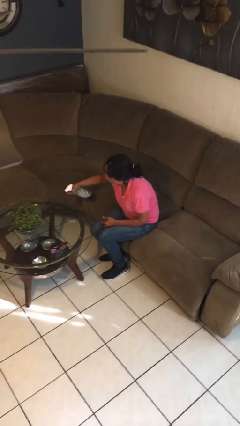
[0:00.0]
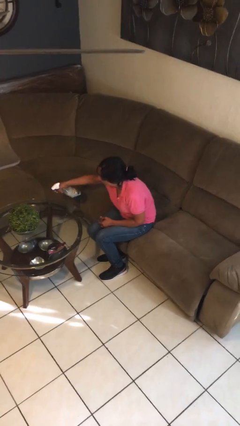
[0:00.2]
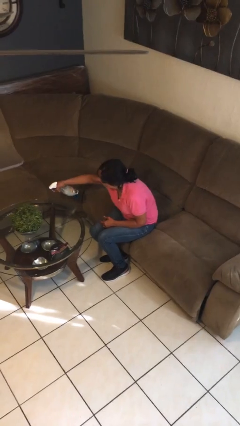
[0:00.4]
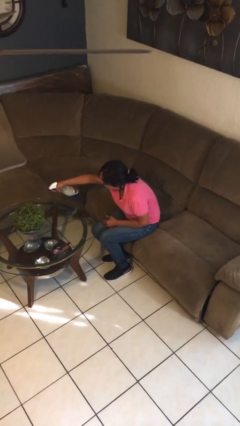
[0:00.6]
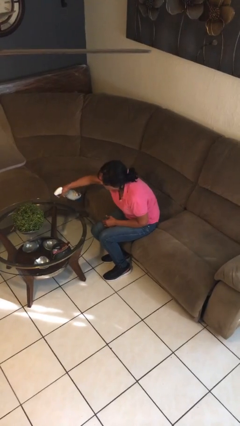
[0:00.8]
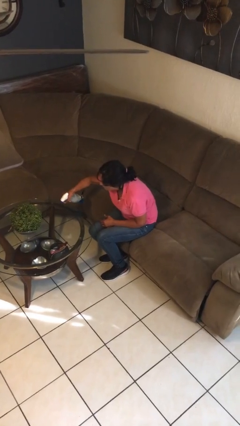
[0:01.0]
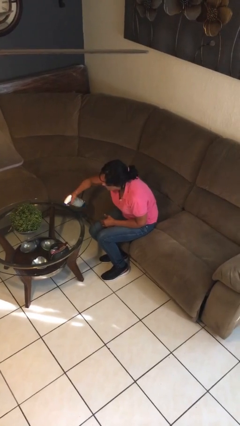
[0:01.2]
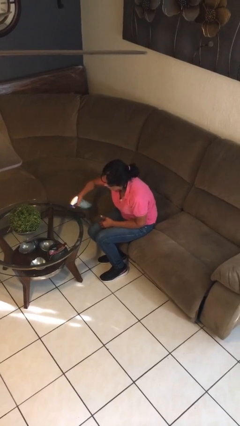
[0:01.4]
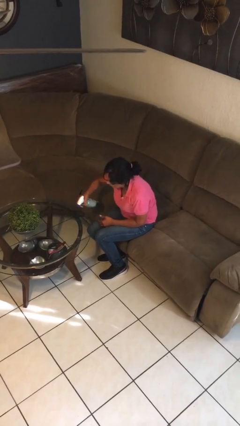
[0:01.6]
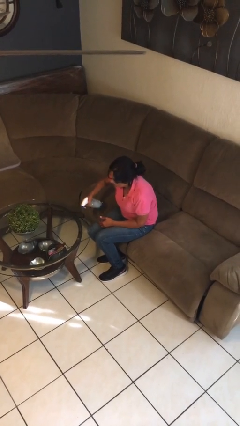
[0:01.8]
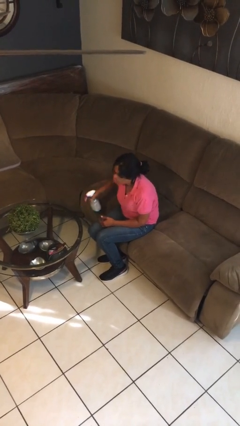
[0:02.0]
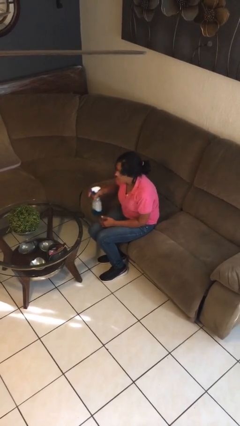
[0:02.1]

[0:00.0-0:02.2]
person sprays from bottle

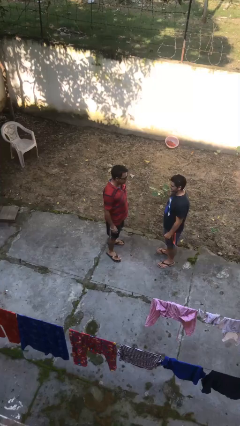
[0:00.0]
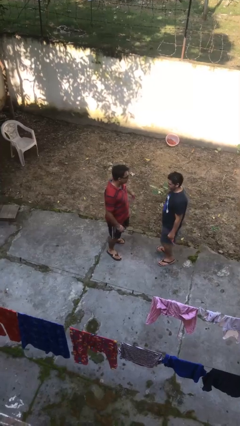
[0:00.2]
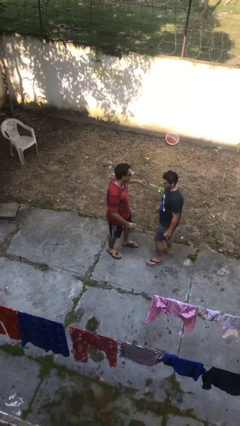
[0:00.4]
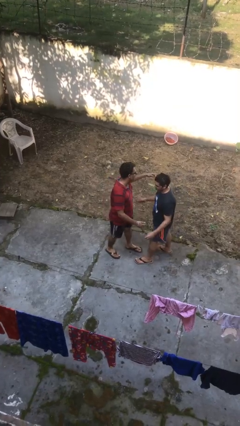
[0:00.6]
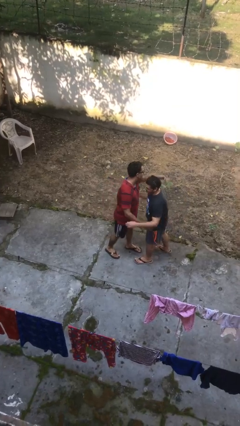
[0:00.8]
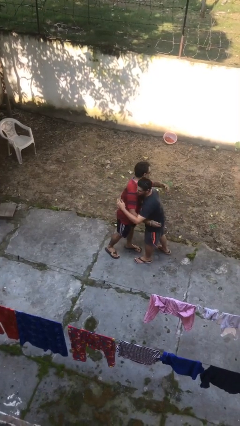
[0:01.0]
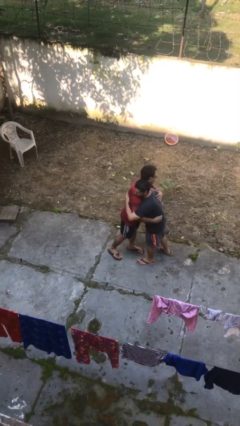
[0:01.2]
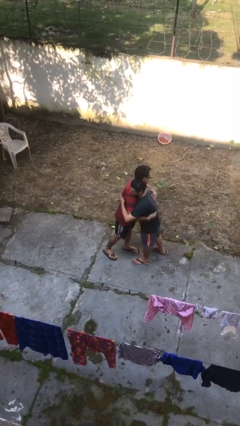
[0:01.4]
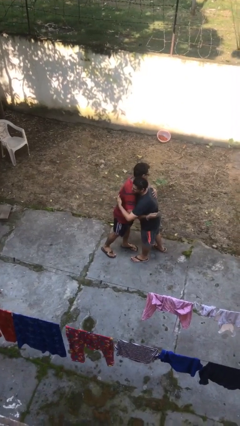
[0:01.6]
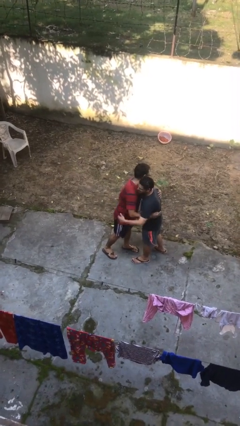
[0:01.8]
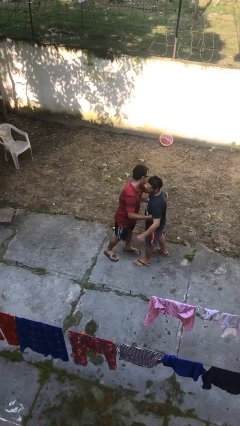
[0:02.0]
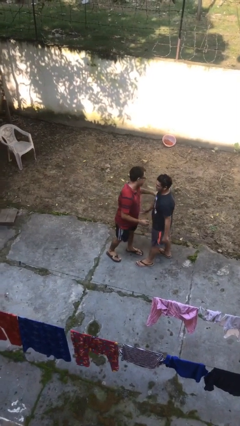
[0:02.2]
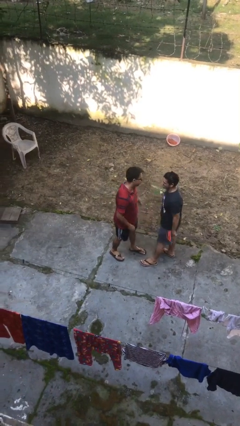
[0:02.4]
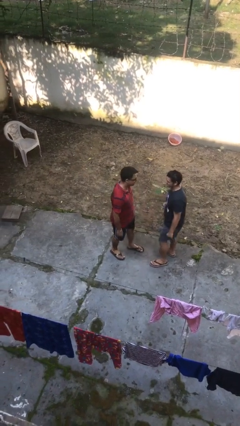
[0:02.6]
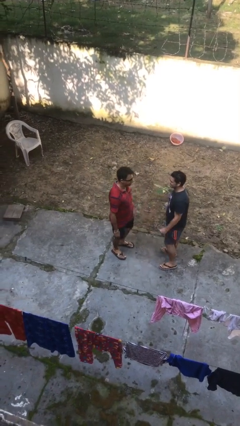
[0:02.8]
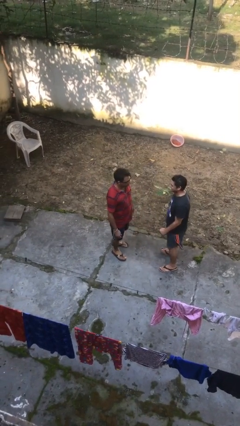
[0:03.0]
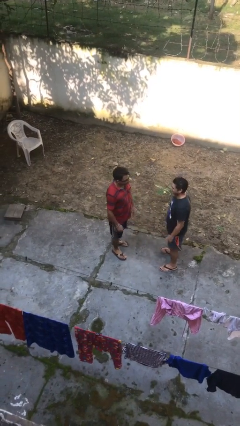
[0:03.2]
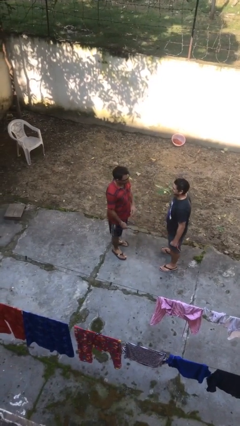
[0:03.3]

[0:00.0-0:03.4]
person embraces person

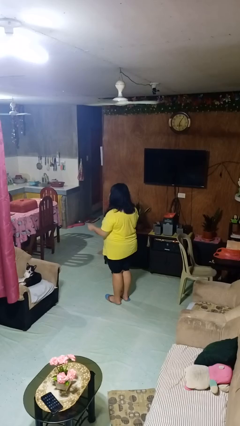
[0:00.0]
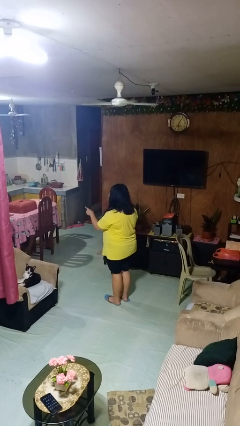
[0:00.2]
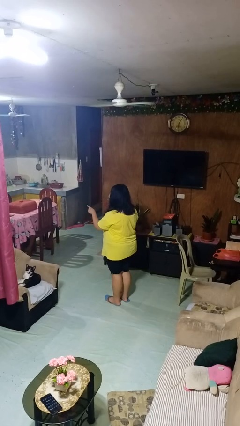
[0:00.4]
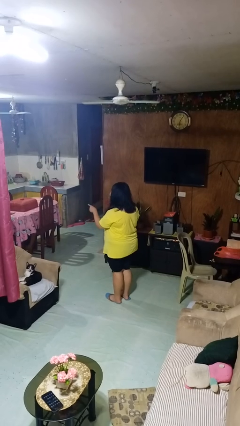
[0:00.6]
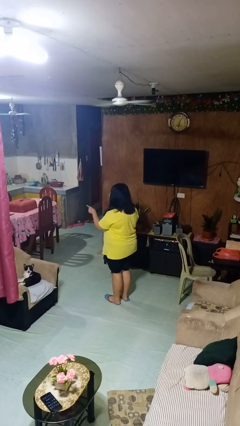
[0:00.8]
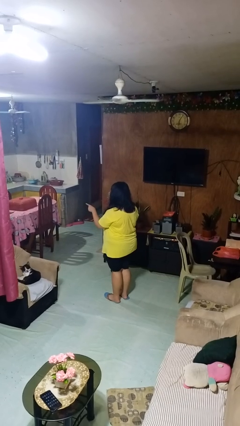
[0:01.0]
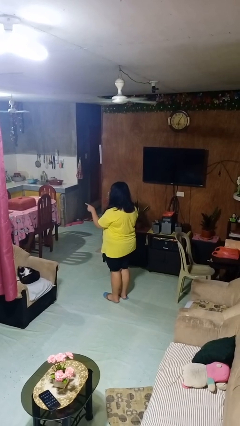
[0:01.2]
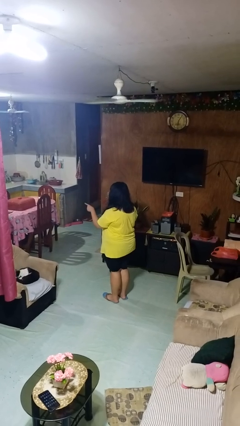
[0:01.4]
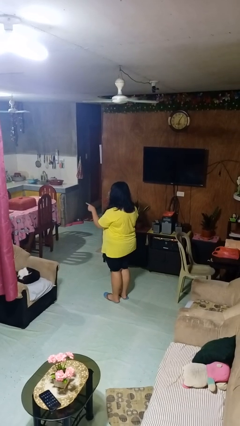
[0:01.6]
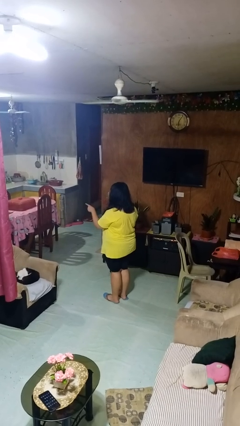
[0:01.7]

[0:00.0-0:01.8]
person points at person

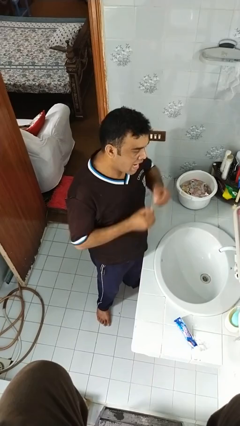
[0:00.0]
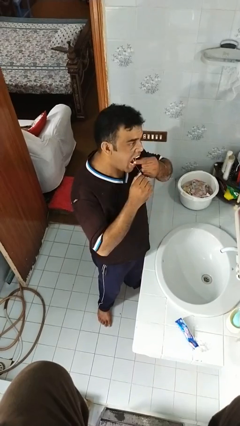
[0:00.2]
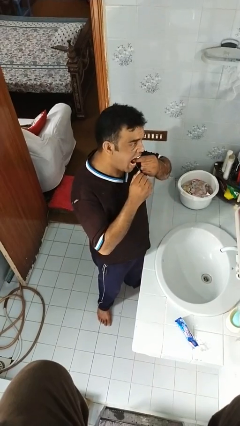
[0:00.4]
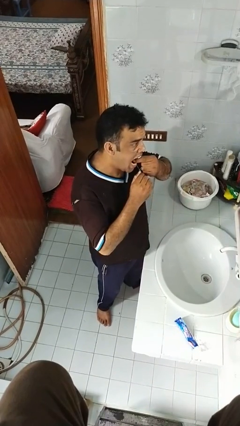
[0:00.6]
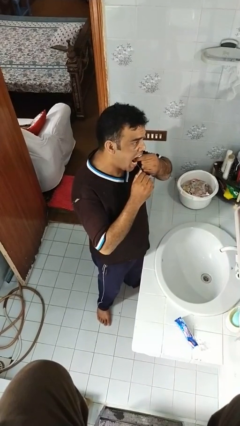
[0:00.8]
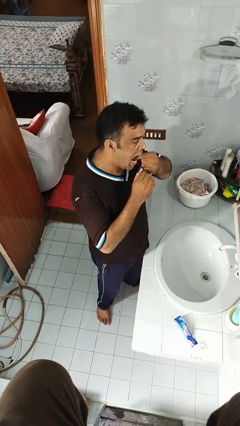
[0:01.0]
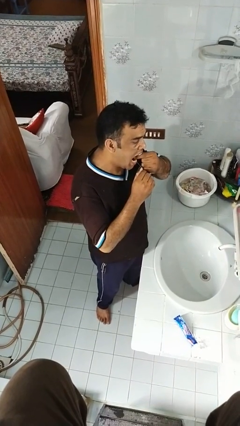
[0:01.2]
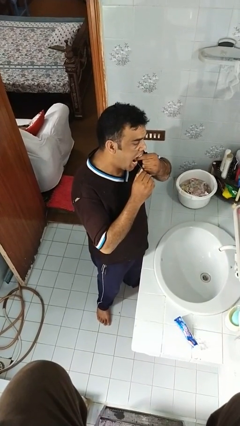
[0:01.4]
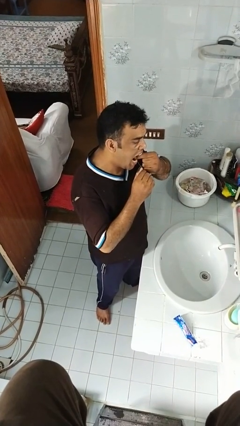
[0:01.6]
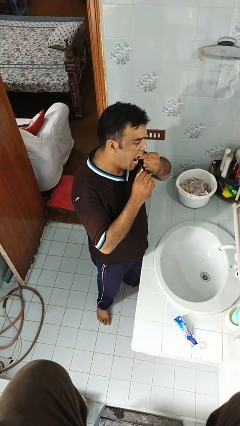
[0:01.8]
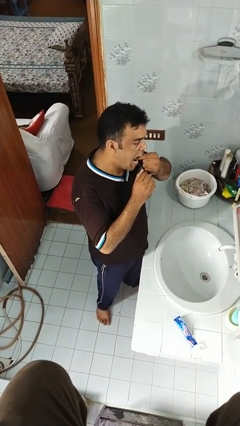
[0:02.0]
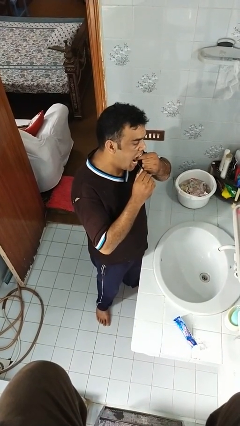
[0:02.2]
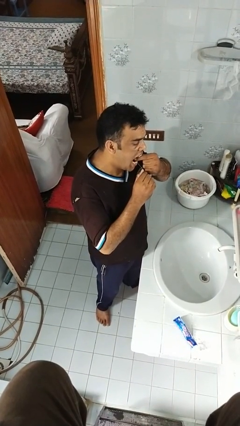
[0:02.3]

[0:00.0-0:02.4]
person flosses

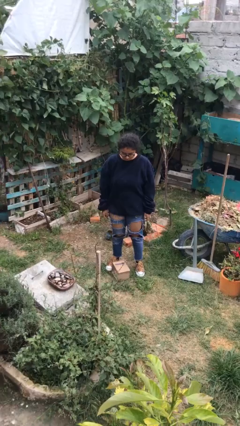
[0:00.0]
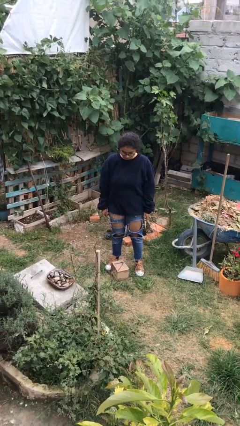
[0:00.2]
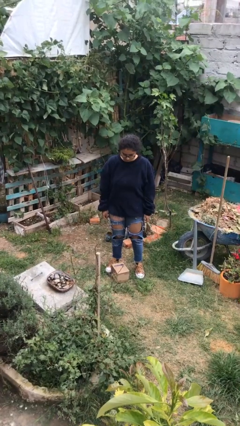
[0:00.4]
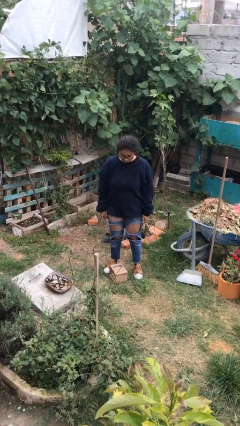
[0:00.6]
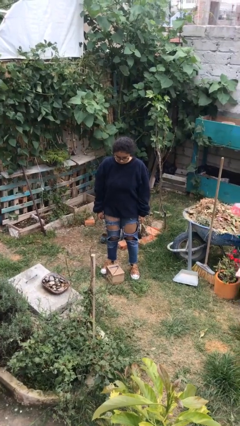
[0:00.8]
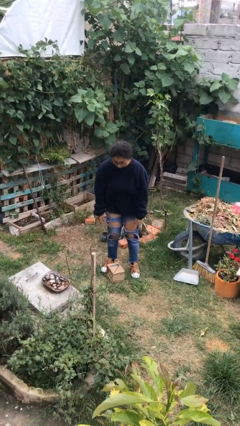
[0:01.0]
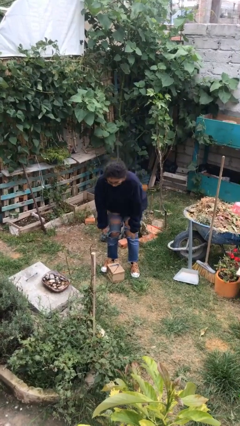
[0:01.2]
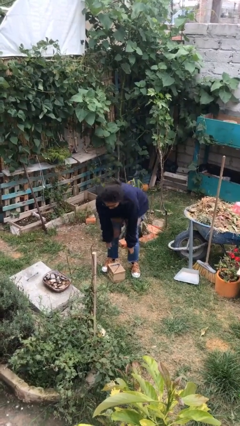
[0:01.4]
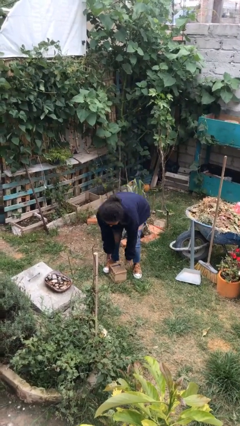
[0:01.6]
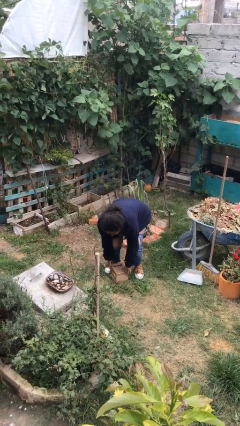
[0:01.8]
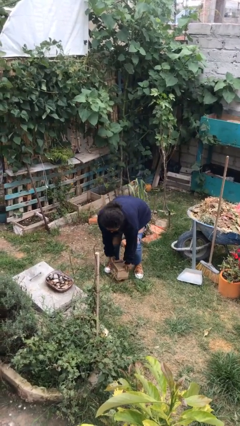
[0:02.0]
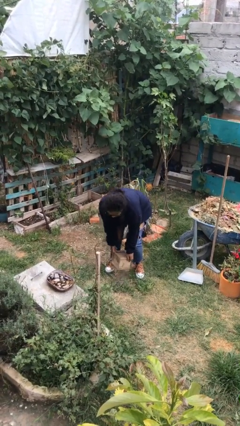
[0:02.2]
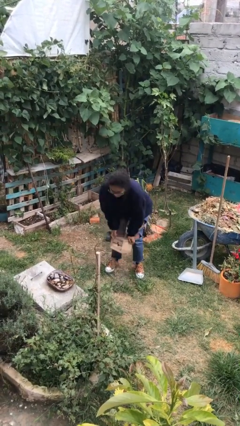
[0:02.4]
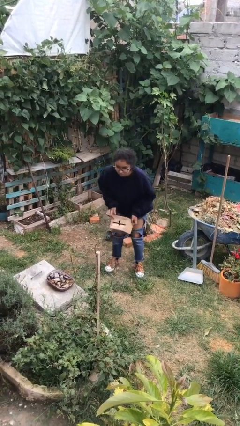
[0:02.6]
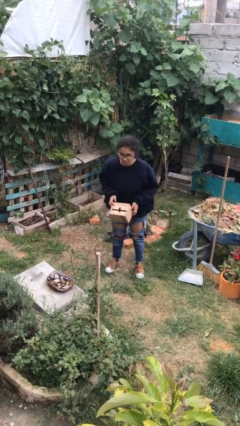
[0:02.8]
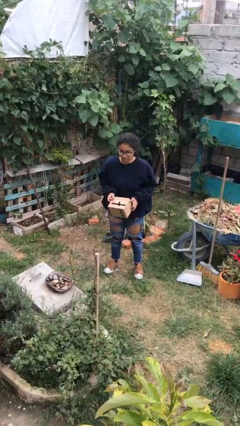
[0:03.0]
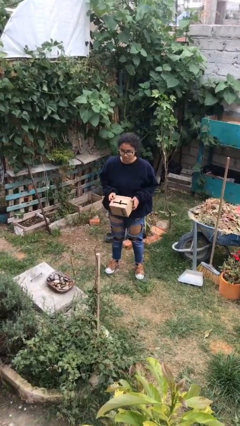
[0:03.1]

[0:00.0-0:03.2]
person picks up object from floor

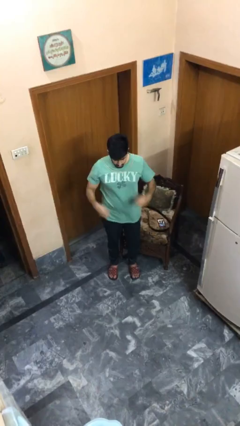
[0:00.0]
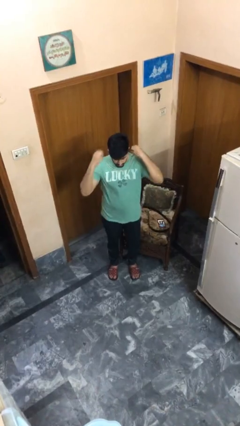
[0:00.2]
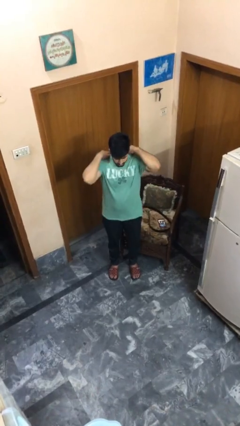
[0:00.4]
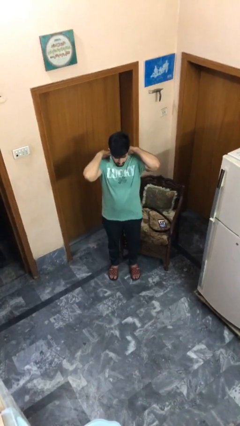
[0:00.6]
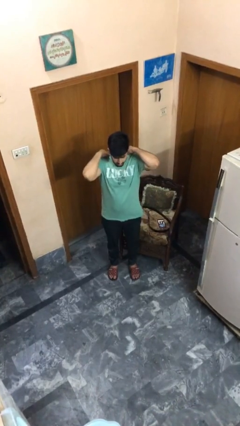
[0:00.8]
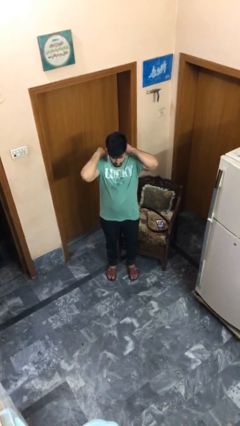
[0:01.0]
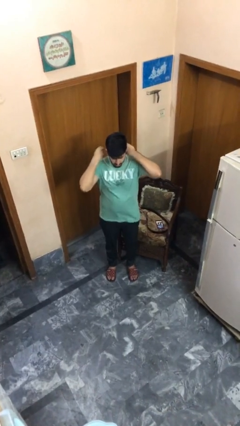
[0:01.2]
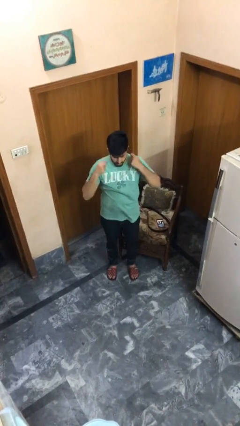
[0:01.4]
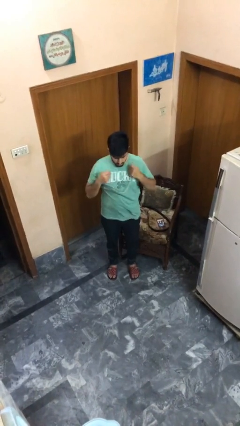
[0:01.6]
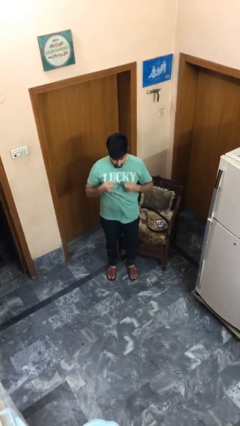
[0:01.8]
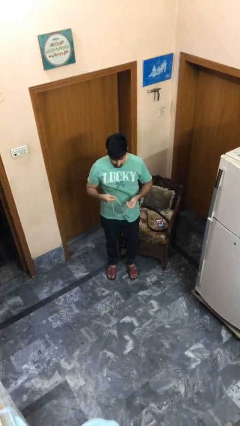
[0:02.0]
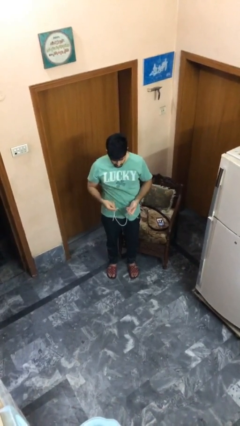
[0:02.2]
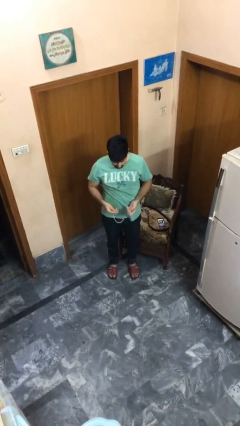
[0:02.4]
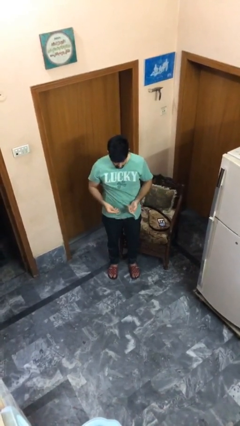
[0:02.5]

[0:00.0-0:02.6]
person takes off necklace

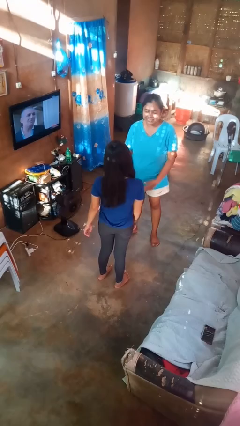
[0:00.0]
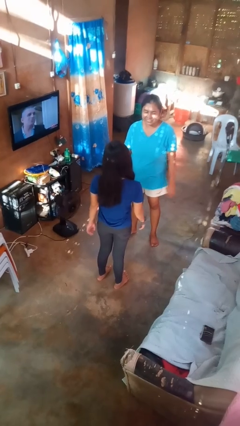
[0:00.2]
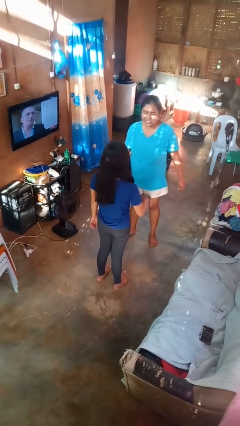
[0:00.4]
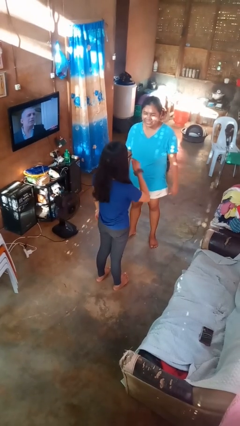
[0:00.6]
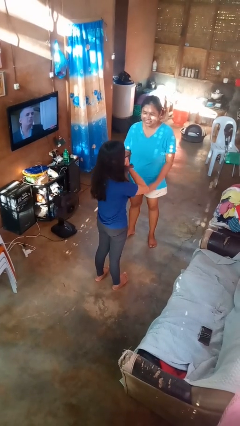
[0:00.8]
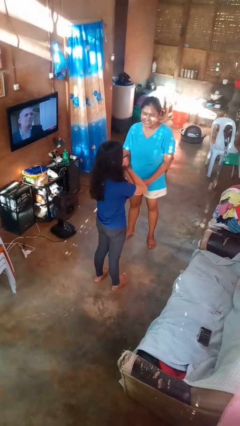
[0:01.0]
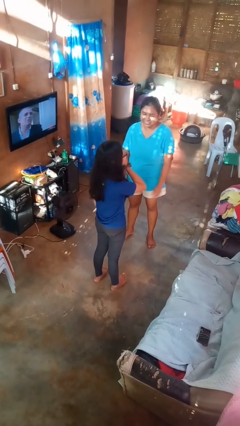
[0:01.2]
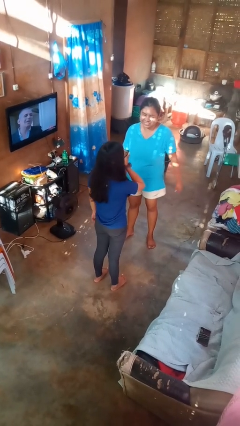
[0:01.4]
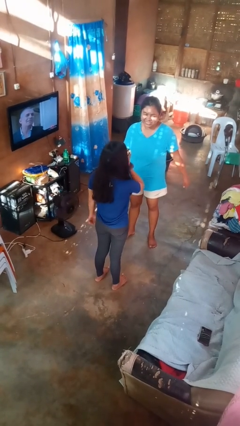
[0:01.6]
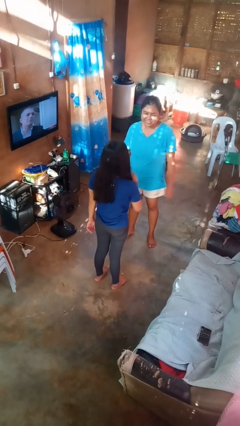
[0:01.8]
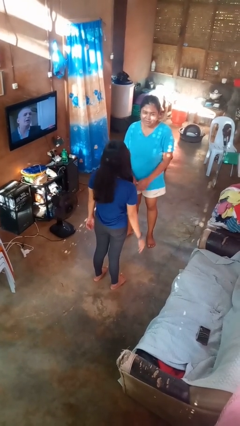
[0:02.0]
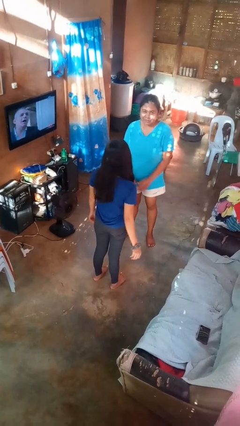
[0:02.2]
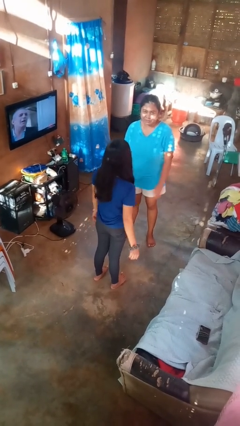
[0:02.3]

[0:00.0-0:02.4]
person laughs with person
